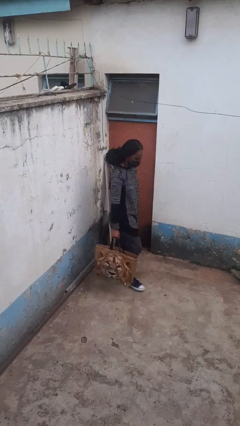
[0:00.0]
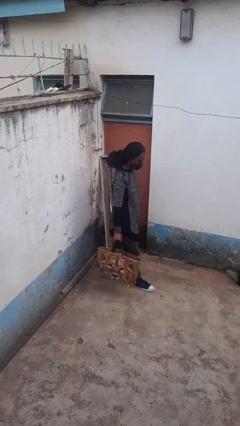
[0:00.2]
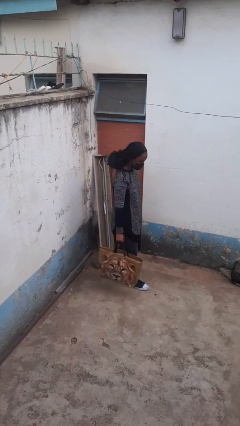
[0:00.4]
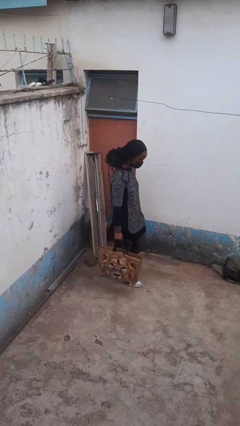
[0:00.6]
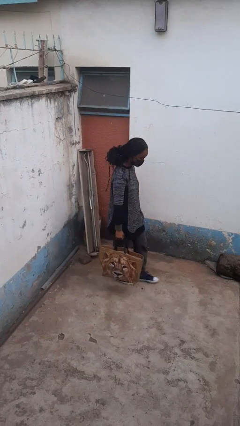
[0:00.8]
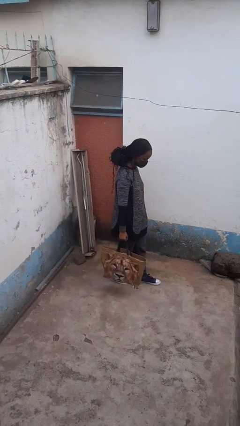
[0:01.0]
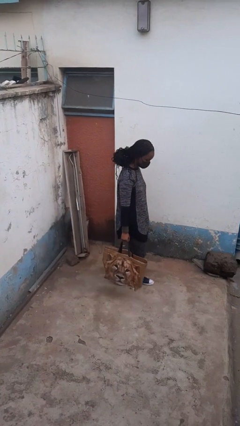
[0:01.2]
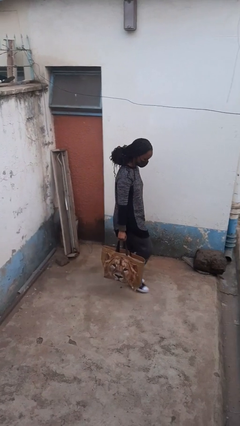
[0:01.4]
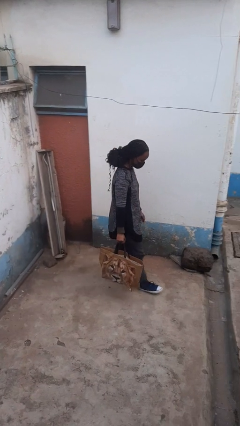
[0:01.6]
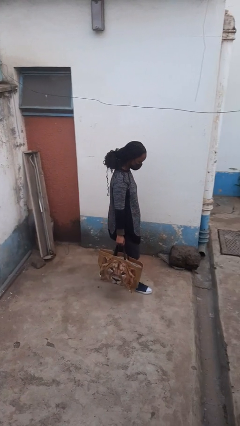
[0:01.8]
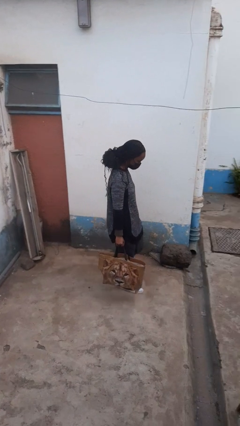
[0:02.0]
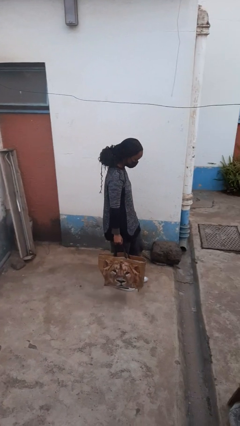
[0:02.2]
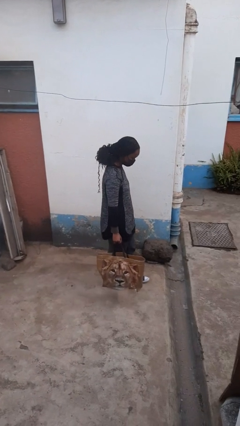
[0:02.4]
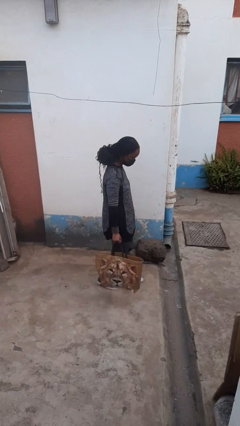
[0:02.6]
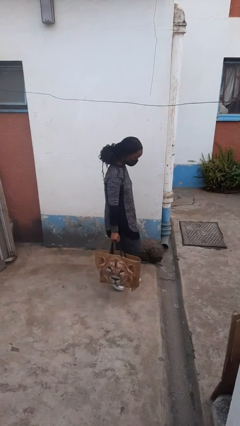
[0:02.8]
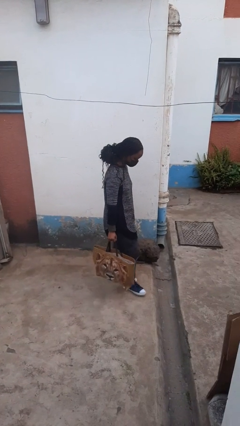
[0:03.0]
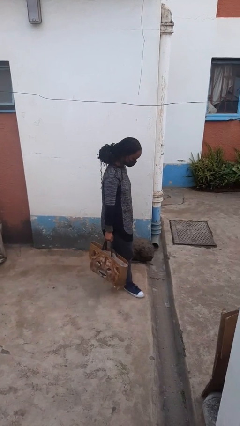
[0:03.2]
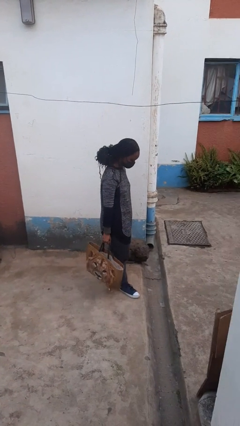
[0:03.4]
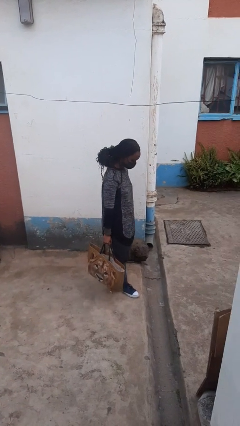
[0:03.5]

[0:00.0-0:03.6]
person carries groceries

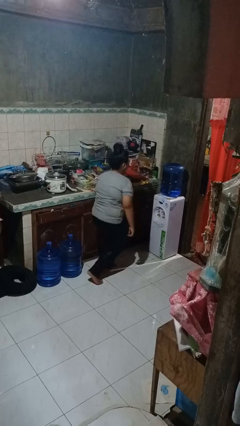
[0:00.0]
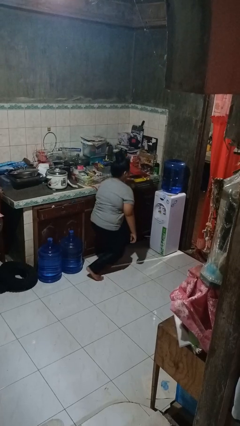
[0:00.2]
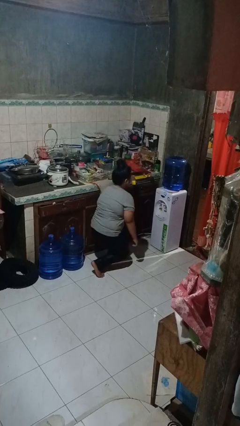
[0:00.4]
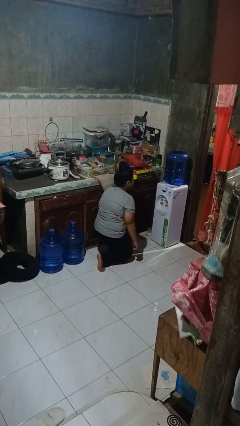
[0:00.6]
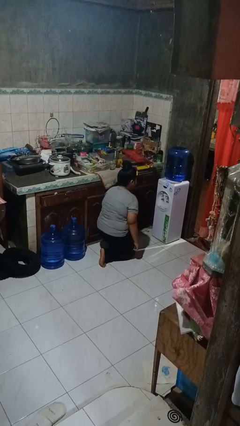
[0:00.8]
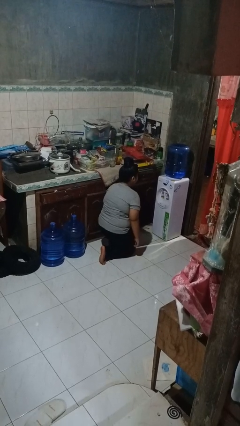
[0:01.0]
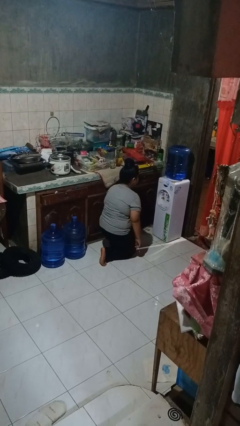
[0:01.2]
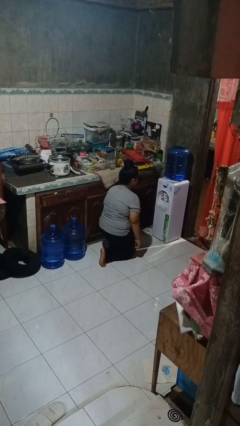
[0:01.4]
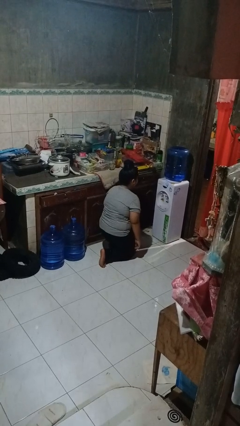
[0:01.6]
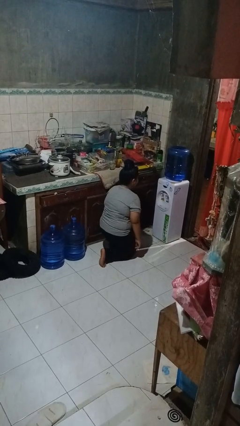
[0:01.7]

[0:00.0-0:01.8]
person kneels

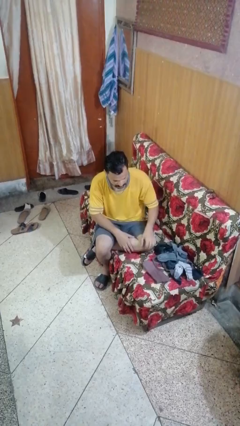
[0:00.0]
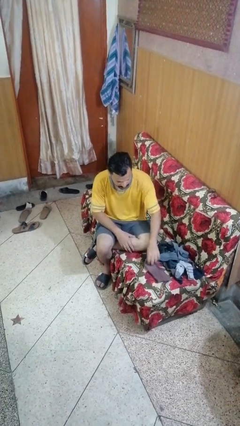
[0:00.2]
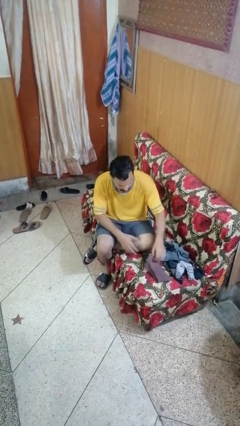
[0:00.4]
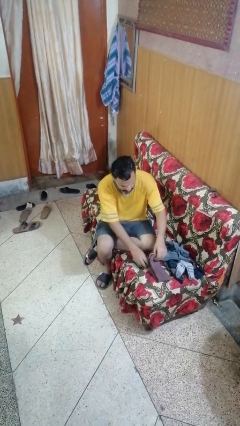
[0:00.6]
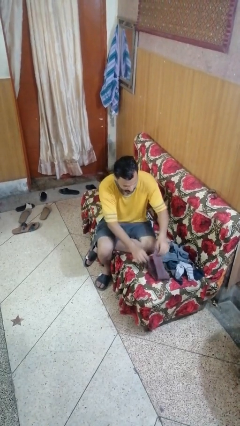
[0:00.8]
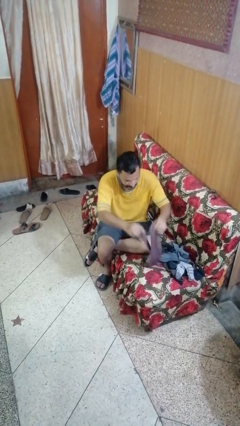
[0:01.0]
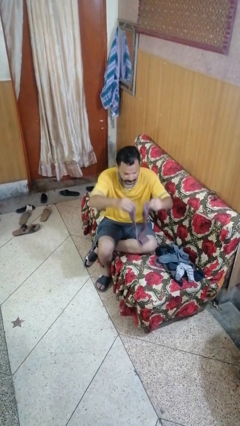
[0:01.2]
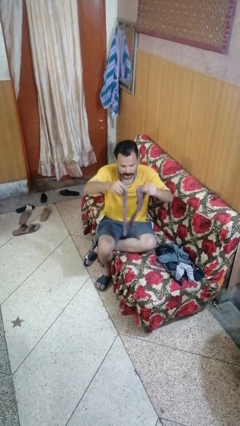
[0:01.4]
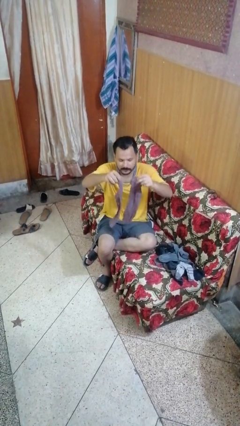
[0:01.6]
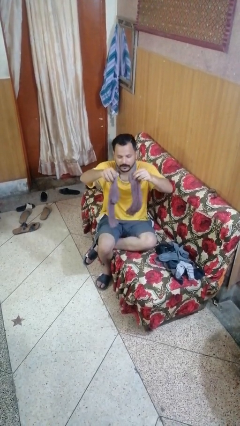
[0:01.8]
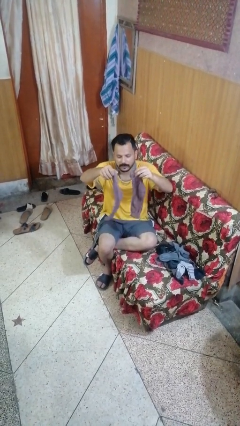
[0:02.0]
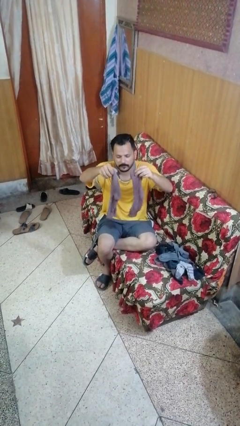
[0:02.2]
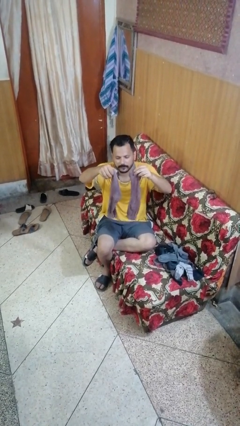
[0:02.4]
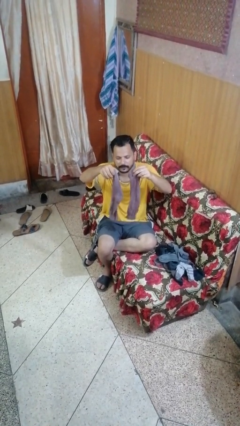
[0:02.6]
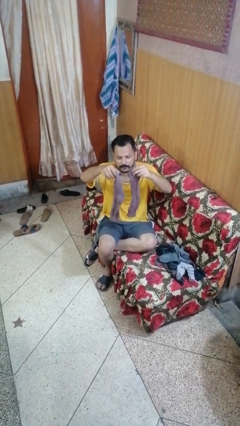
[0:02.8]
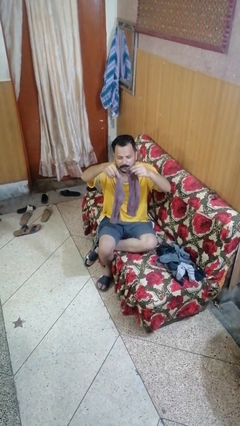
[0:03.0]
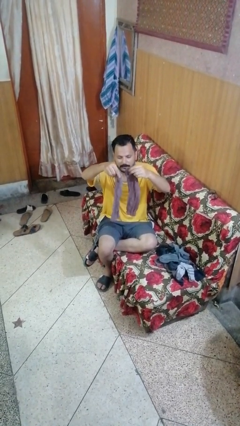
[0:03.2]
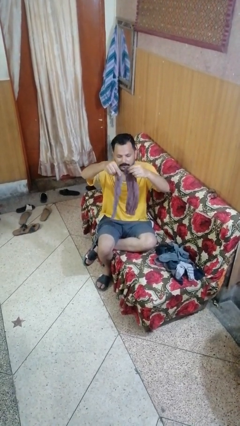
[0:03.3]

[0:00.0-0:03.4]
person folds socks

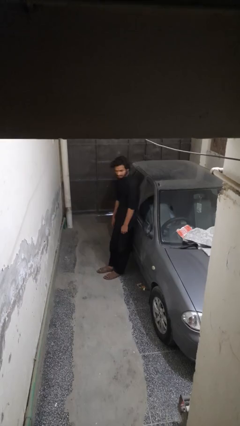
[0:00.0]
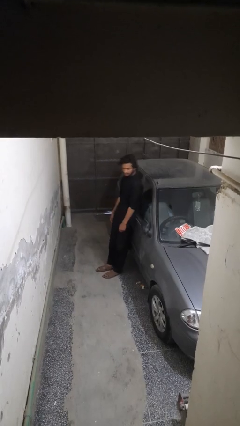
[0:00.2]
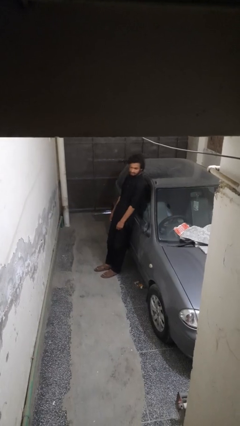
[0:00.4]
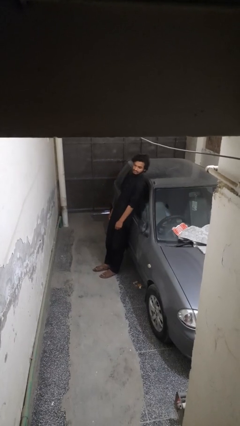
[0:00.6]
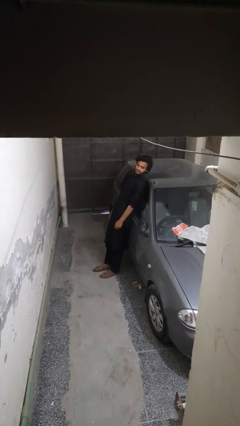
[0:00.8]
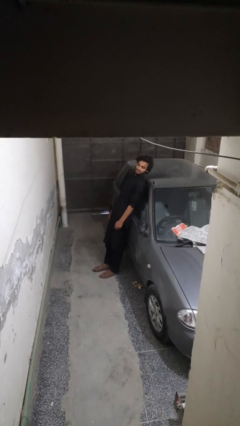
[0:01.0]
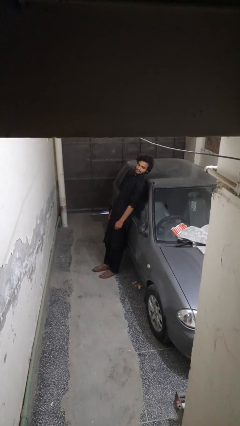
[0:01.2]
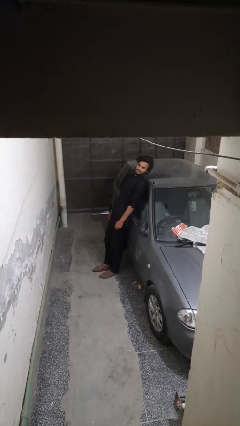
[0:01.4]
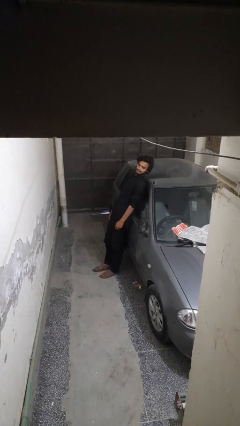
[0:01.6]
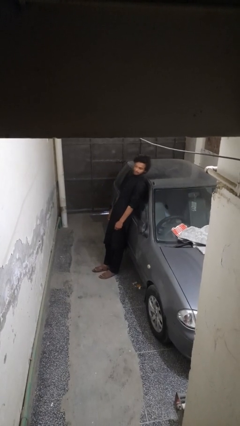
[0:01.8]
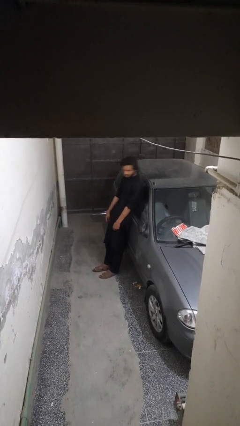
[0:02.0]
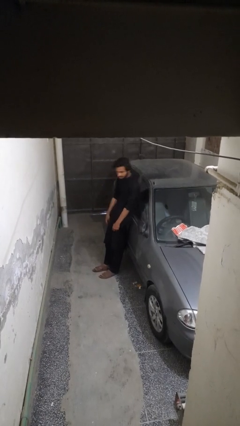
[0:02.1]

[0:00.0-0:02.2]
person leans against car

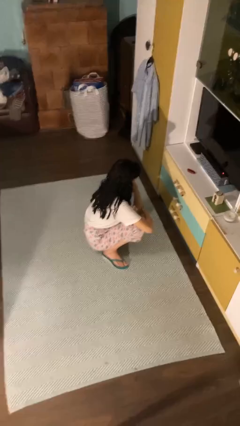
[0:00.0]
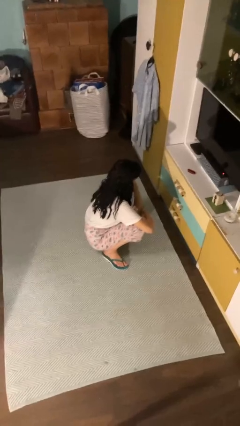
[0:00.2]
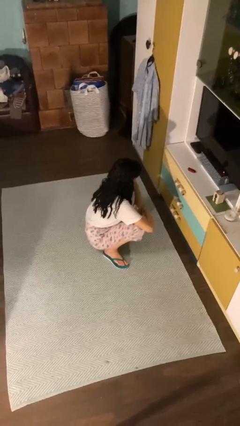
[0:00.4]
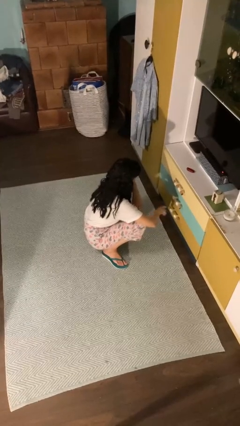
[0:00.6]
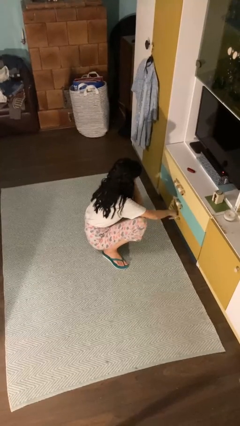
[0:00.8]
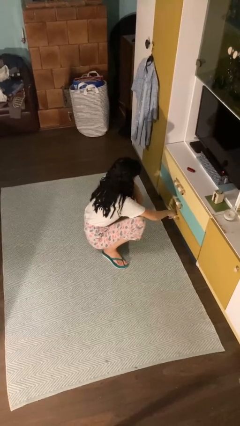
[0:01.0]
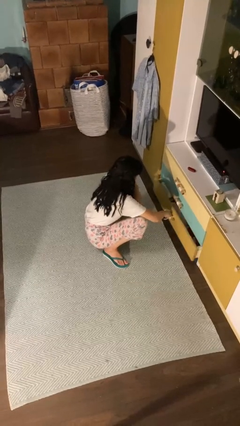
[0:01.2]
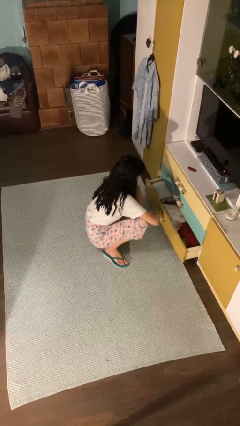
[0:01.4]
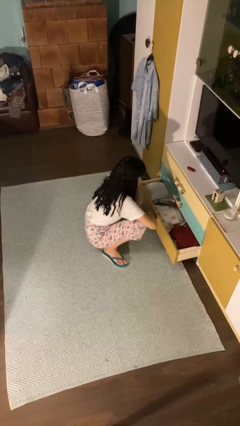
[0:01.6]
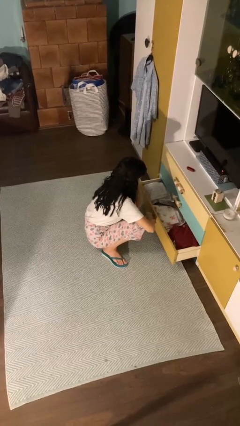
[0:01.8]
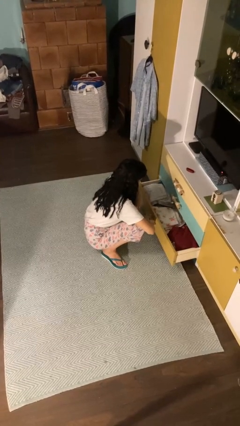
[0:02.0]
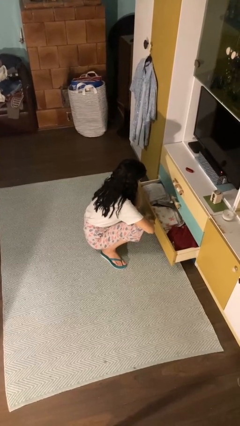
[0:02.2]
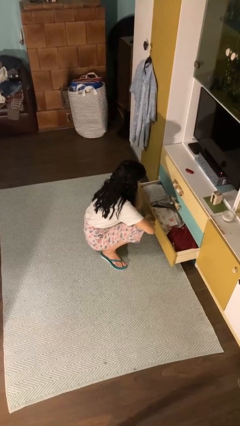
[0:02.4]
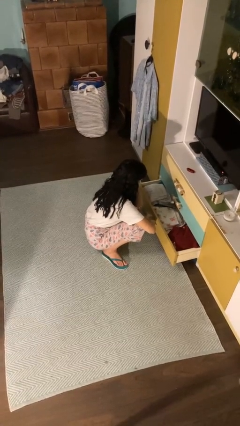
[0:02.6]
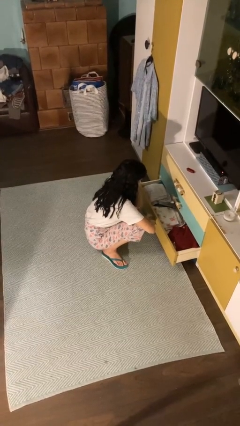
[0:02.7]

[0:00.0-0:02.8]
person opens dresser drawer

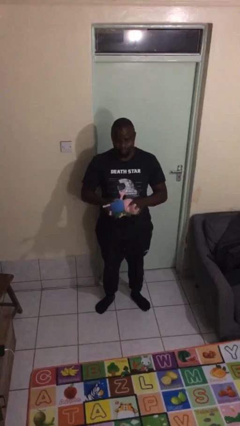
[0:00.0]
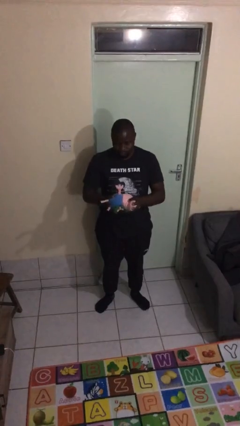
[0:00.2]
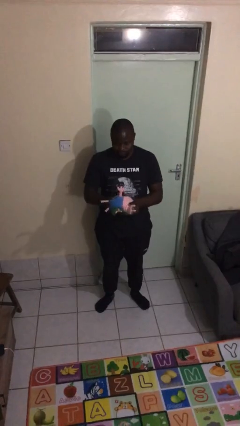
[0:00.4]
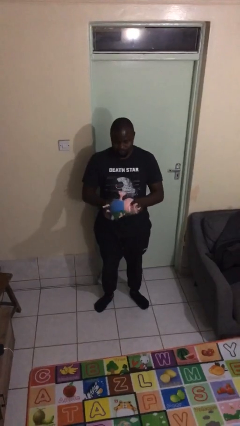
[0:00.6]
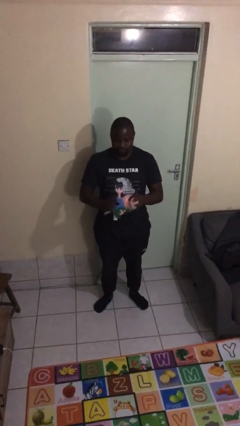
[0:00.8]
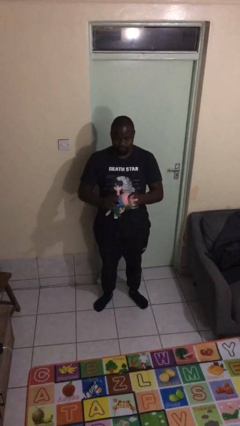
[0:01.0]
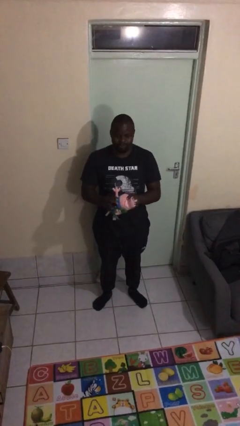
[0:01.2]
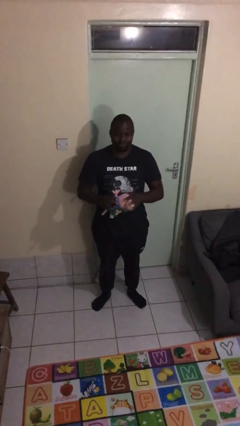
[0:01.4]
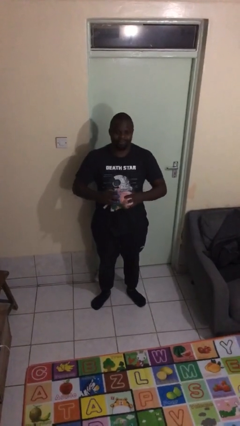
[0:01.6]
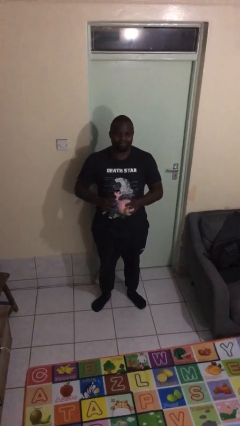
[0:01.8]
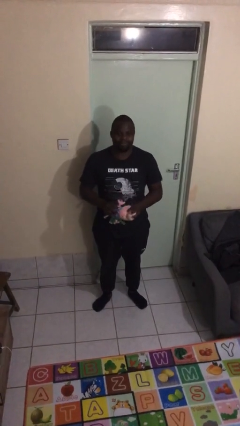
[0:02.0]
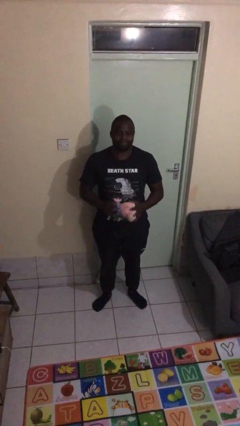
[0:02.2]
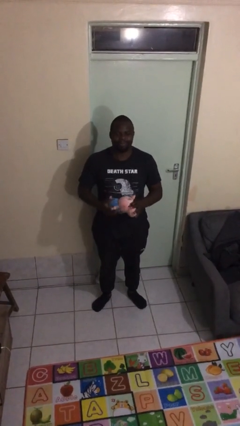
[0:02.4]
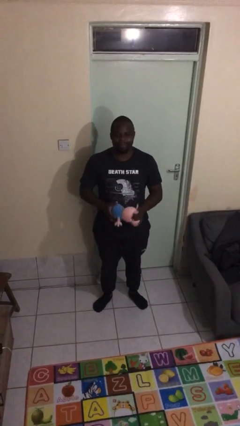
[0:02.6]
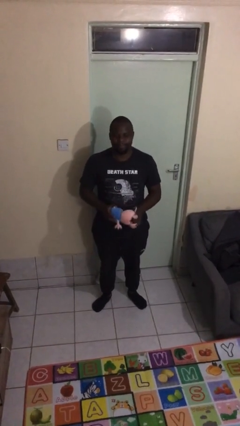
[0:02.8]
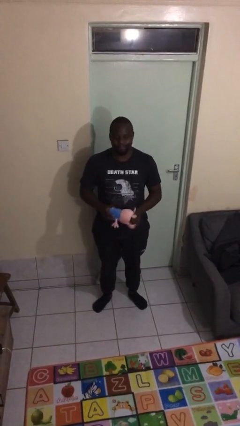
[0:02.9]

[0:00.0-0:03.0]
person squeezes object

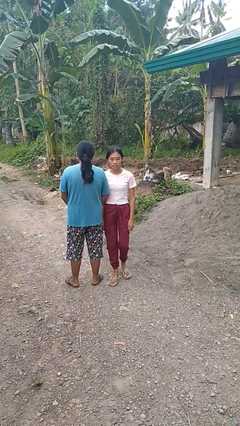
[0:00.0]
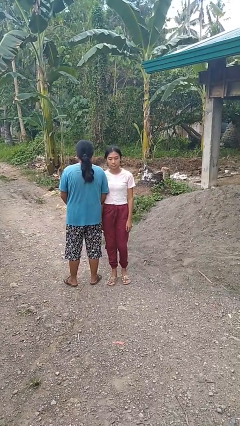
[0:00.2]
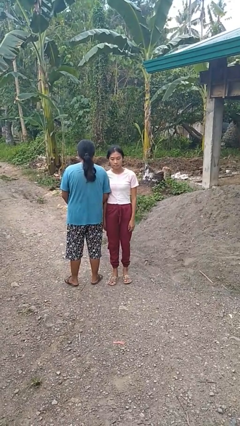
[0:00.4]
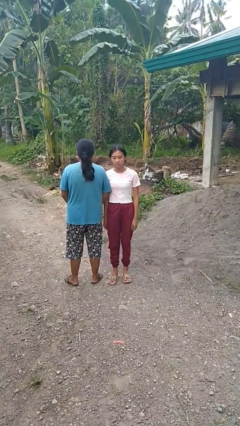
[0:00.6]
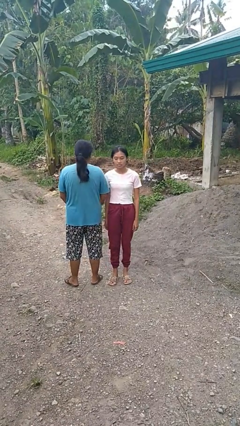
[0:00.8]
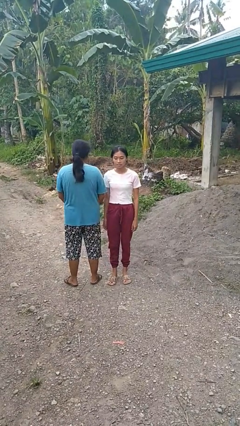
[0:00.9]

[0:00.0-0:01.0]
person bumps into person
